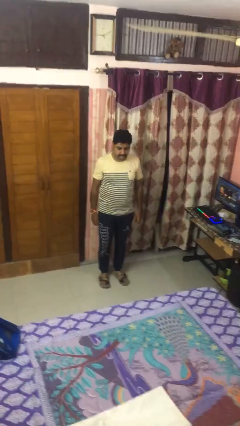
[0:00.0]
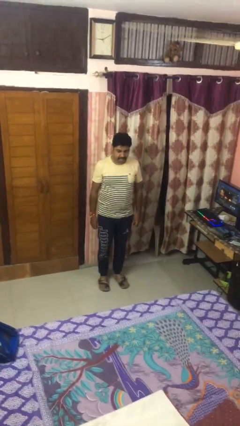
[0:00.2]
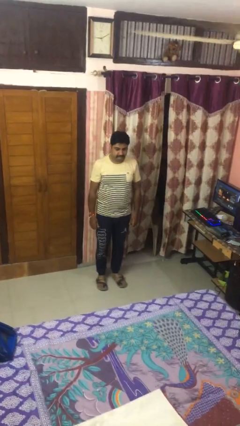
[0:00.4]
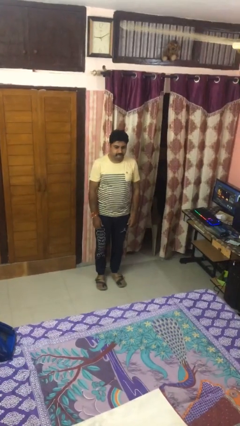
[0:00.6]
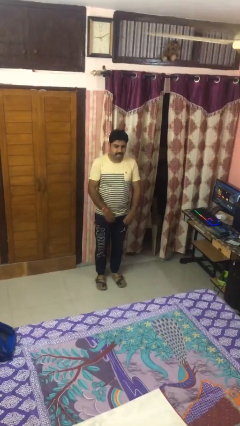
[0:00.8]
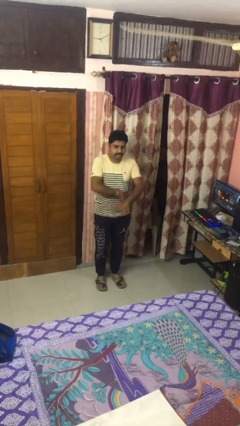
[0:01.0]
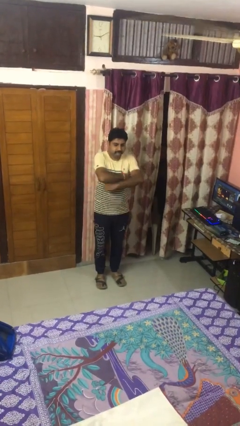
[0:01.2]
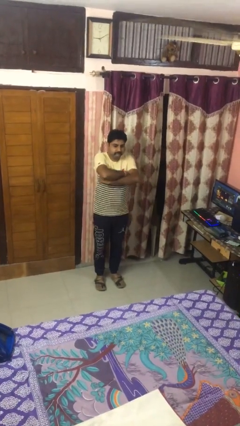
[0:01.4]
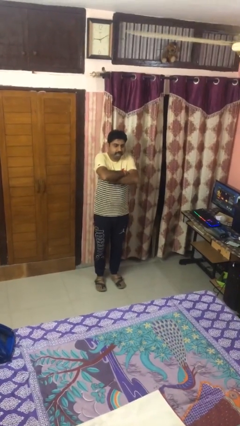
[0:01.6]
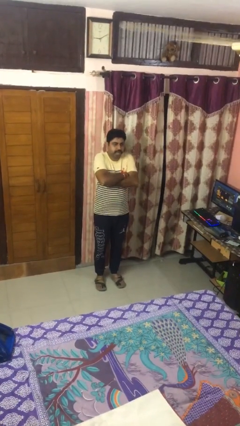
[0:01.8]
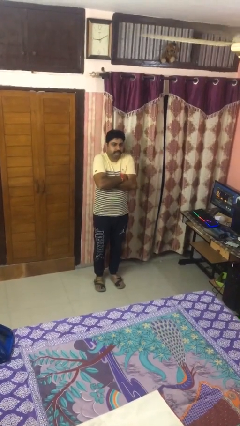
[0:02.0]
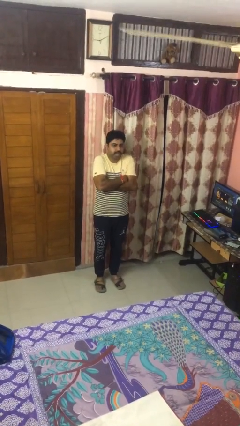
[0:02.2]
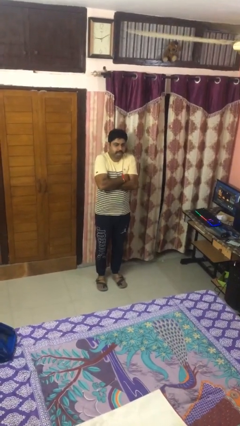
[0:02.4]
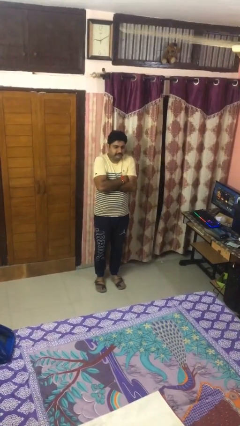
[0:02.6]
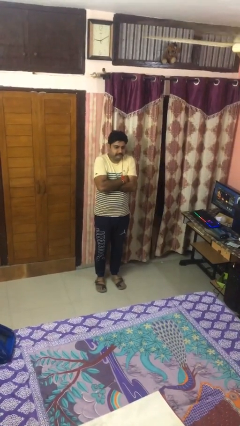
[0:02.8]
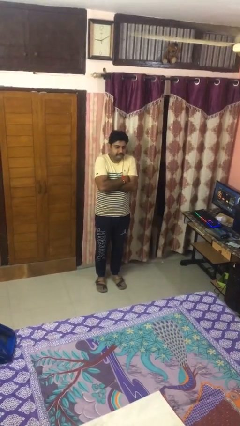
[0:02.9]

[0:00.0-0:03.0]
person crosses arms

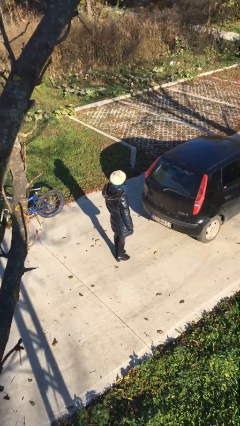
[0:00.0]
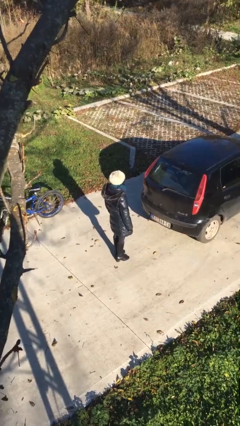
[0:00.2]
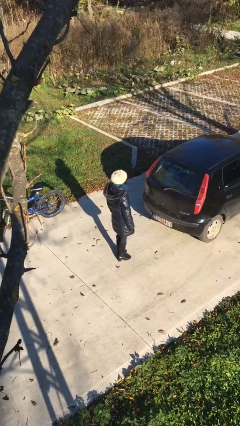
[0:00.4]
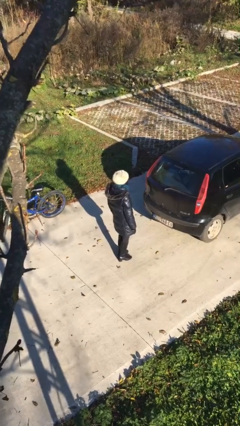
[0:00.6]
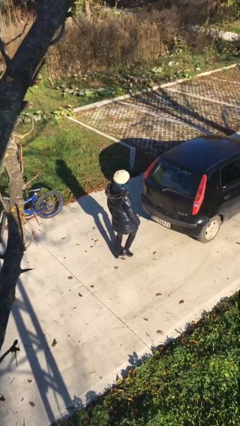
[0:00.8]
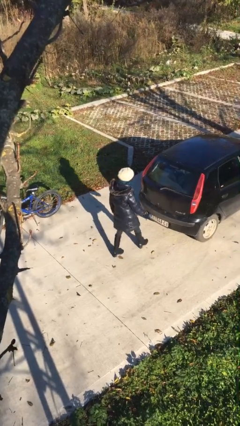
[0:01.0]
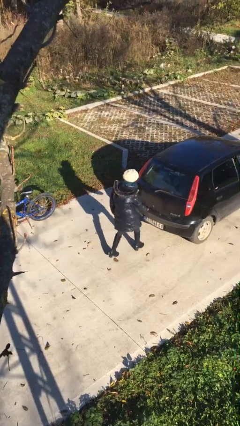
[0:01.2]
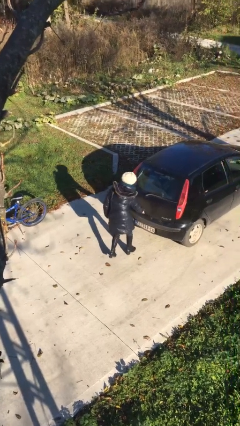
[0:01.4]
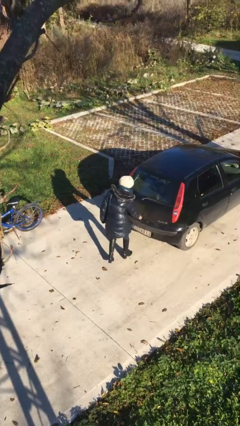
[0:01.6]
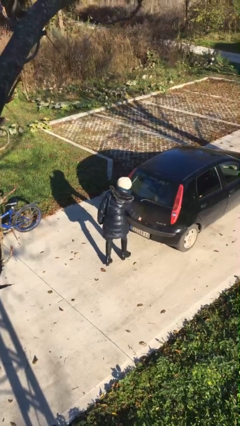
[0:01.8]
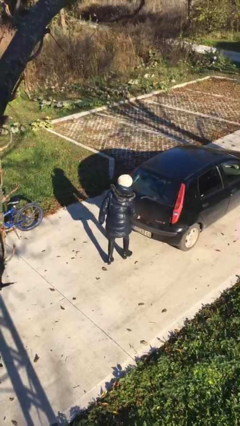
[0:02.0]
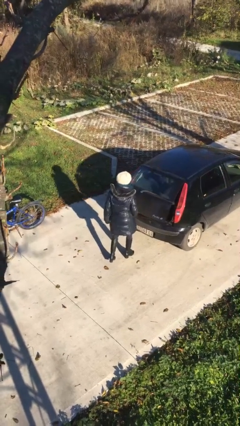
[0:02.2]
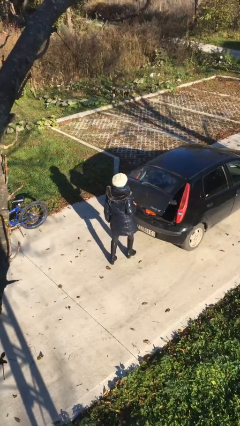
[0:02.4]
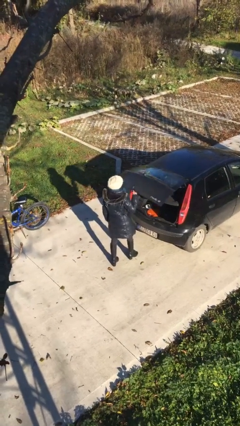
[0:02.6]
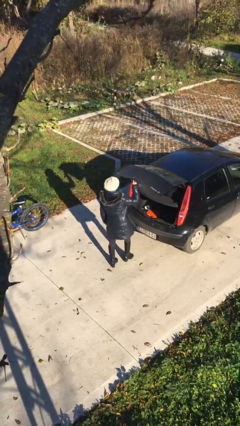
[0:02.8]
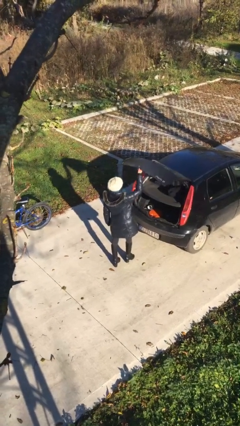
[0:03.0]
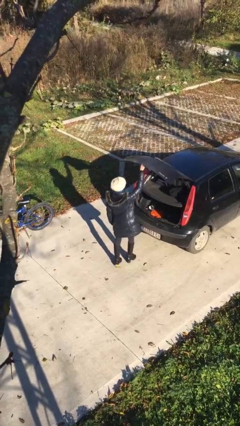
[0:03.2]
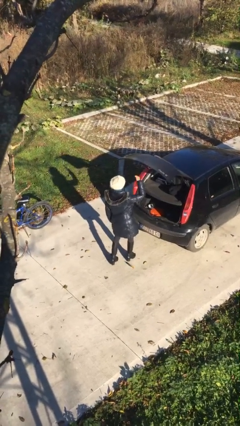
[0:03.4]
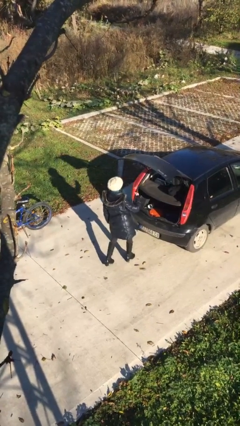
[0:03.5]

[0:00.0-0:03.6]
person opens car trunk

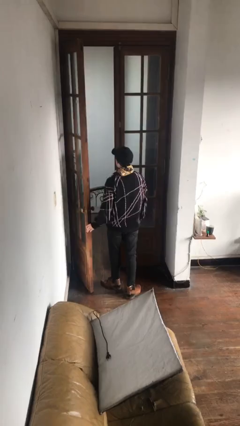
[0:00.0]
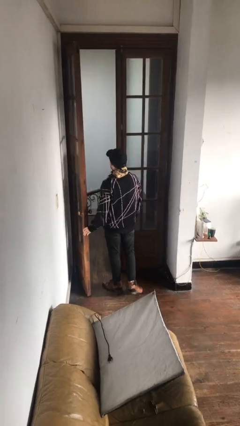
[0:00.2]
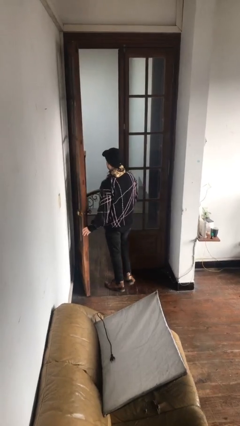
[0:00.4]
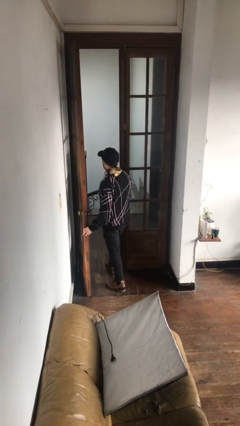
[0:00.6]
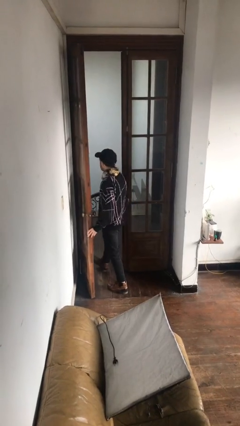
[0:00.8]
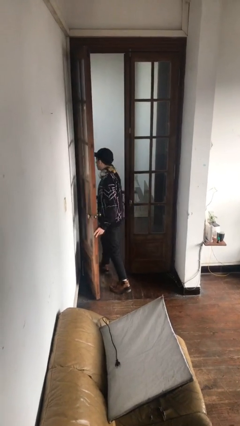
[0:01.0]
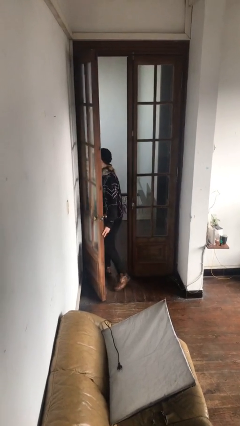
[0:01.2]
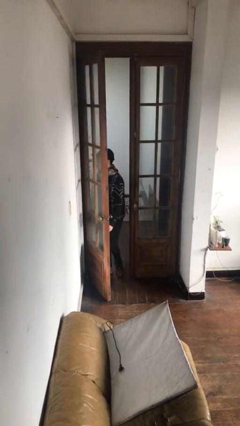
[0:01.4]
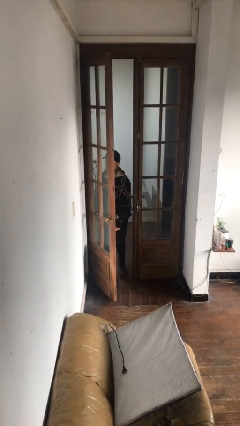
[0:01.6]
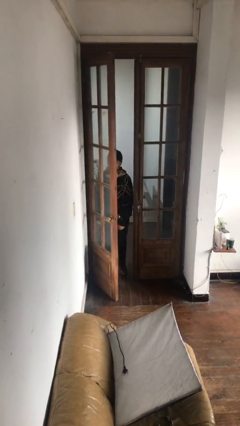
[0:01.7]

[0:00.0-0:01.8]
person exits scene through structure

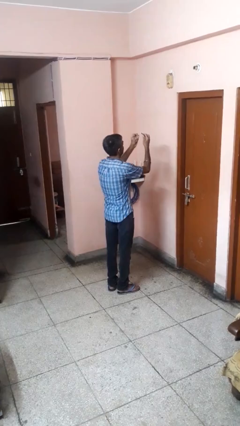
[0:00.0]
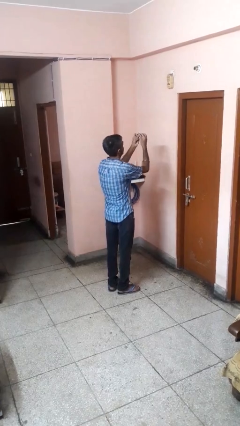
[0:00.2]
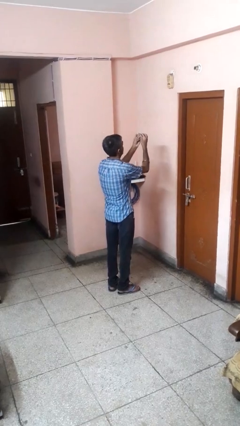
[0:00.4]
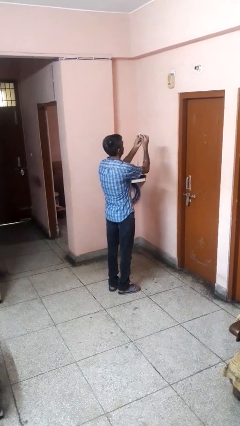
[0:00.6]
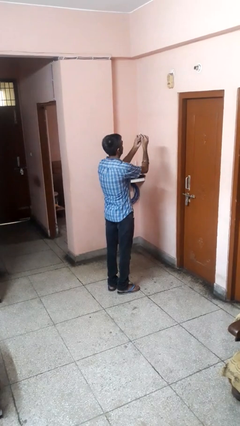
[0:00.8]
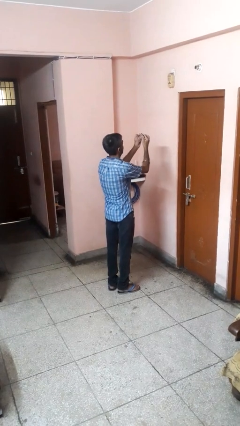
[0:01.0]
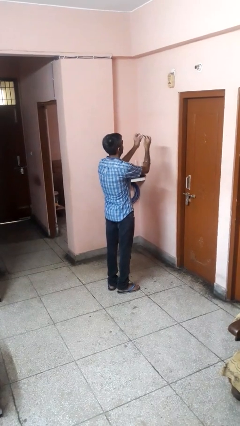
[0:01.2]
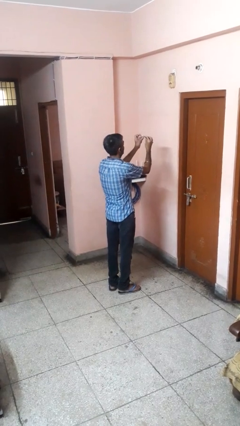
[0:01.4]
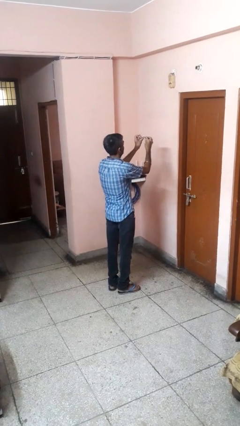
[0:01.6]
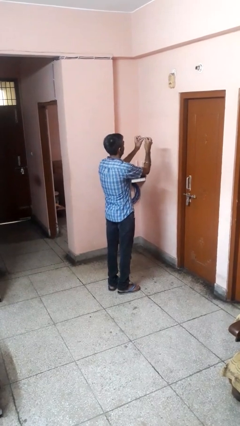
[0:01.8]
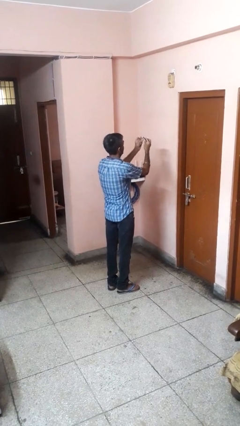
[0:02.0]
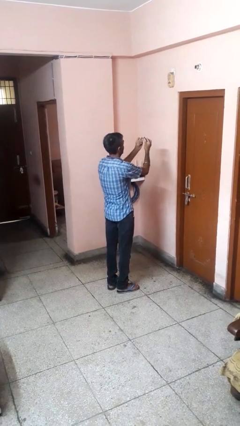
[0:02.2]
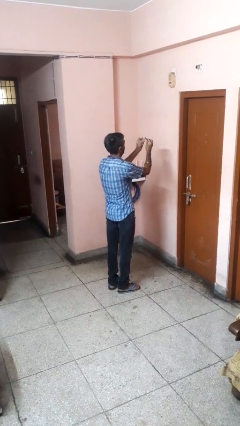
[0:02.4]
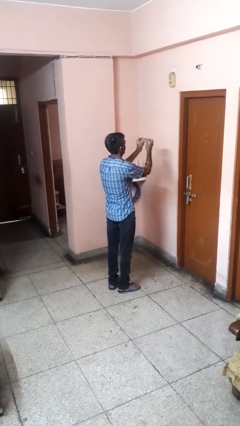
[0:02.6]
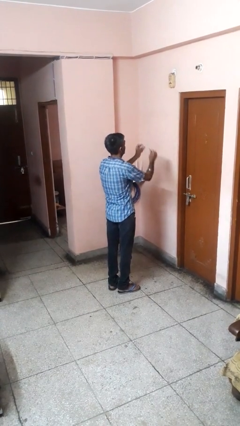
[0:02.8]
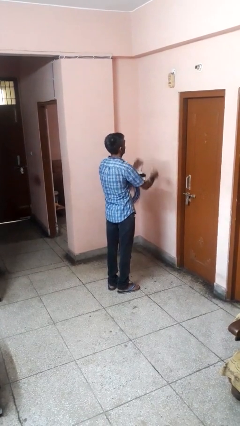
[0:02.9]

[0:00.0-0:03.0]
person files fingernails

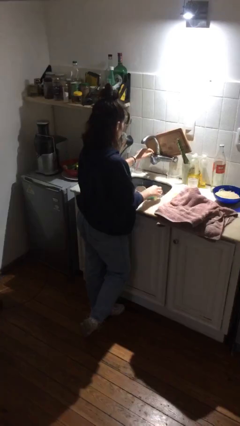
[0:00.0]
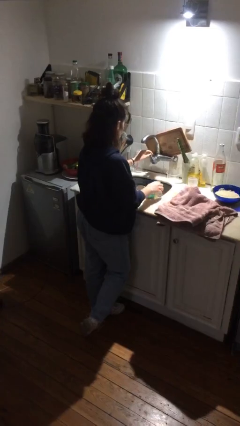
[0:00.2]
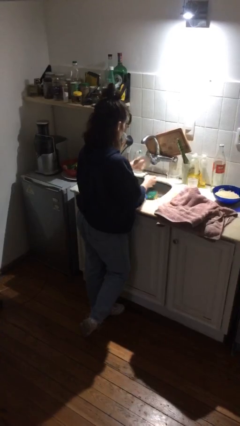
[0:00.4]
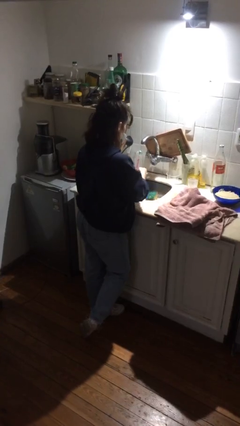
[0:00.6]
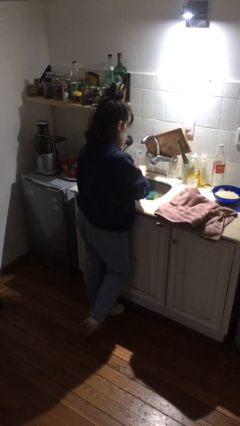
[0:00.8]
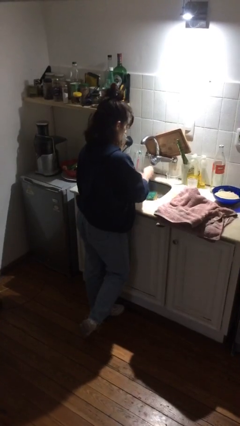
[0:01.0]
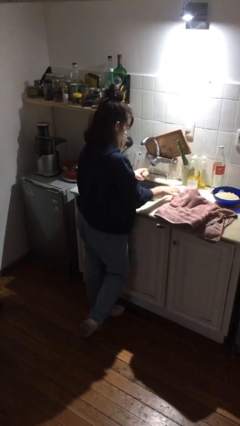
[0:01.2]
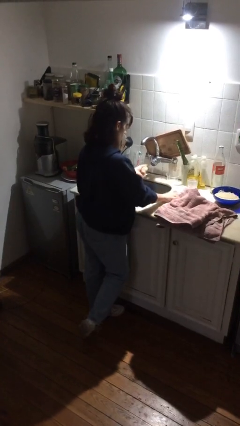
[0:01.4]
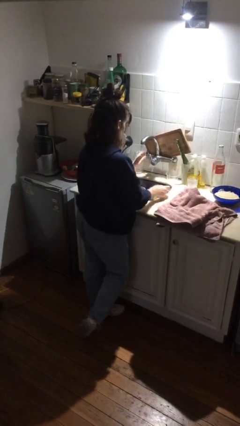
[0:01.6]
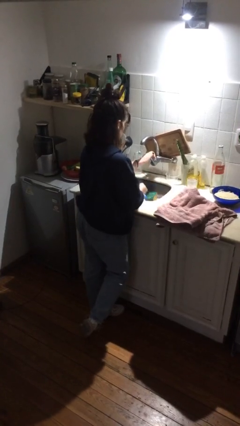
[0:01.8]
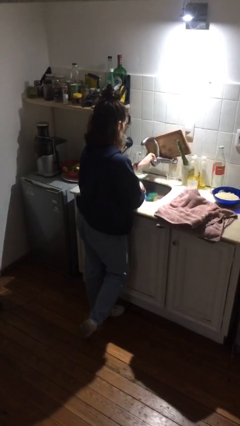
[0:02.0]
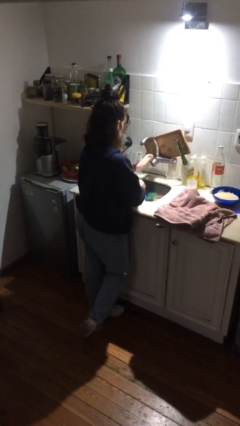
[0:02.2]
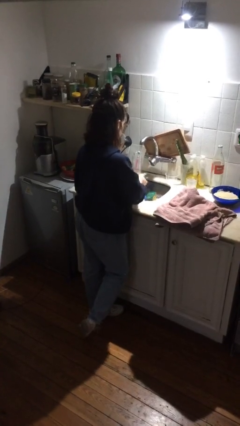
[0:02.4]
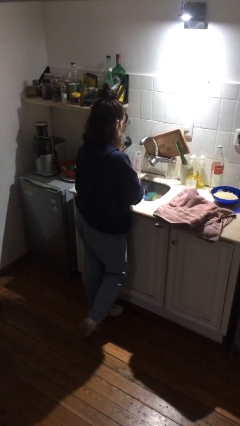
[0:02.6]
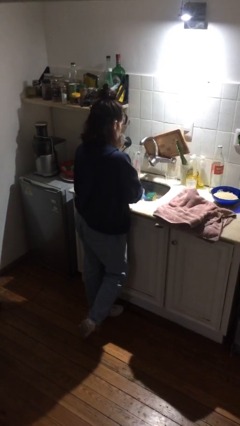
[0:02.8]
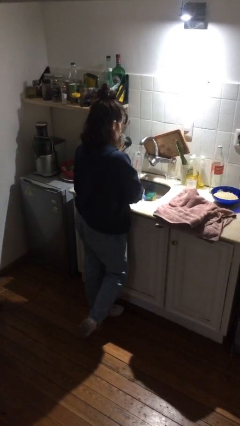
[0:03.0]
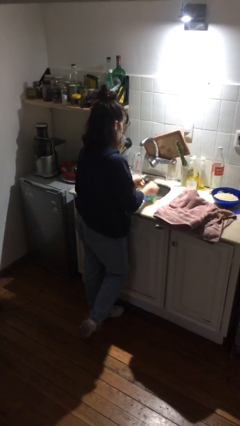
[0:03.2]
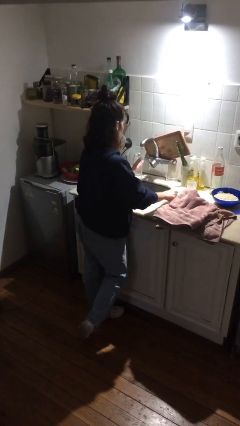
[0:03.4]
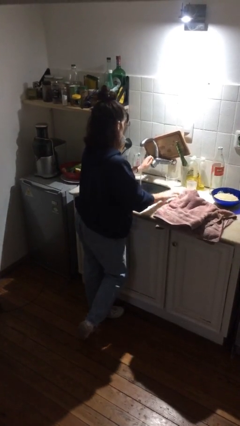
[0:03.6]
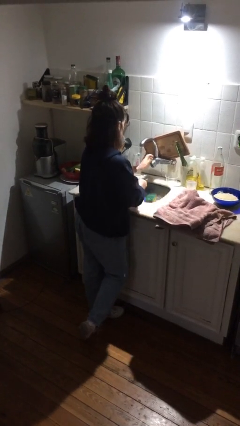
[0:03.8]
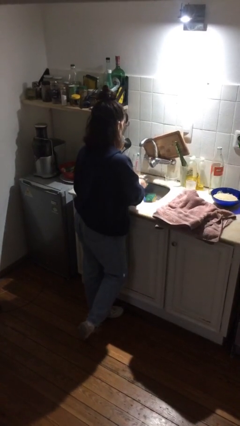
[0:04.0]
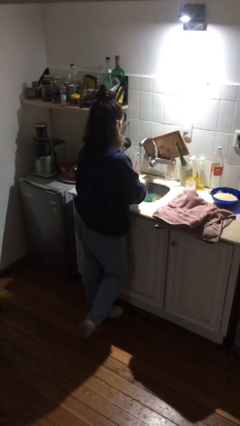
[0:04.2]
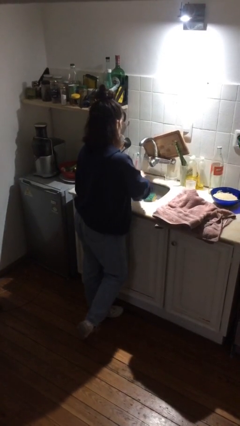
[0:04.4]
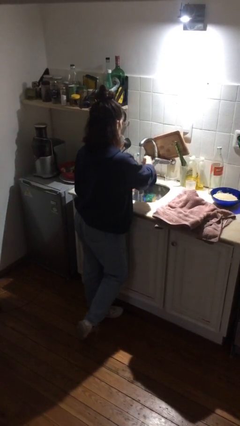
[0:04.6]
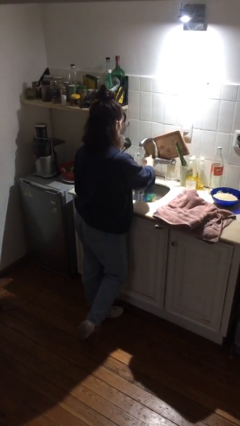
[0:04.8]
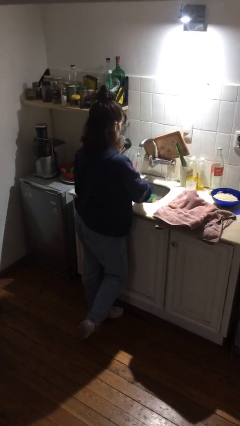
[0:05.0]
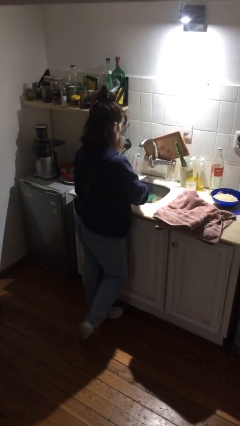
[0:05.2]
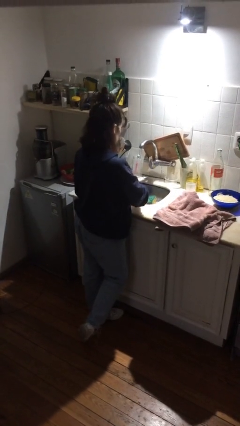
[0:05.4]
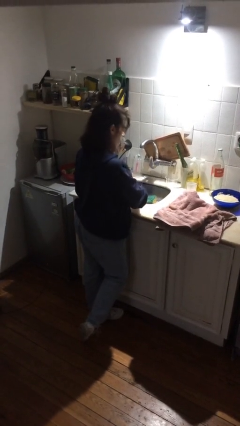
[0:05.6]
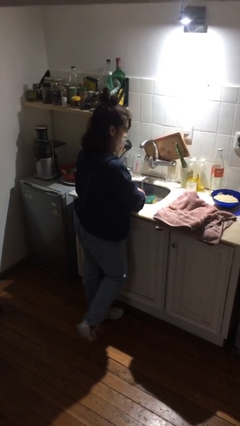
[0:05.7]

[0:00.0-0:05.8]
person washes hands

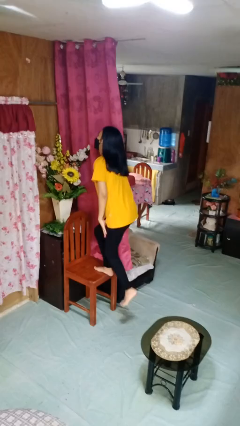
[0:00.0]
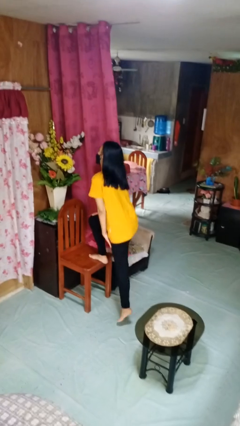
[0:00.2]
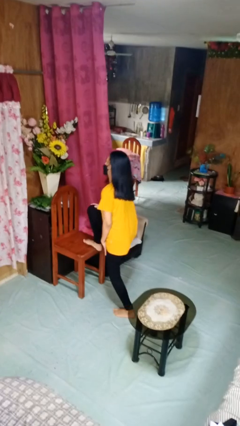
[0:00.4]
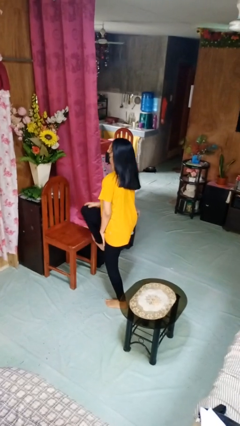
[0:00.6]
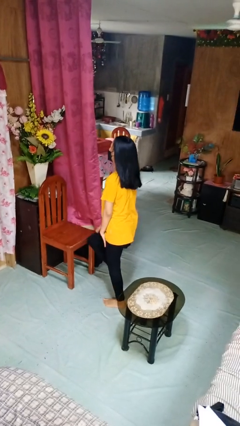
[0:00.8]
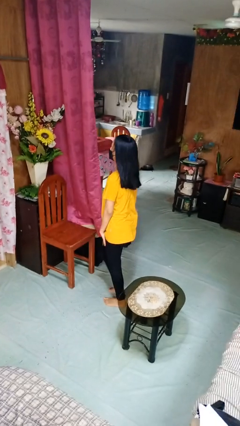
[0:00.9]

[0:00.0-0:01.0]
person climbs off chair
